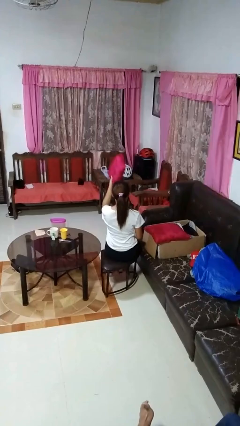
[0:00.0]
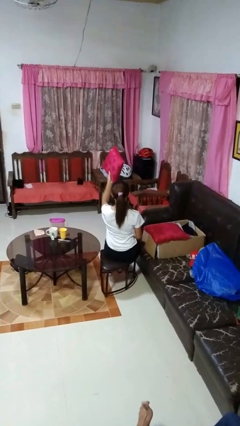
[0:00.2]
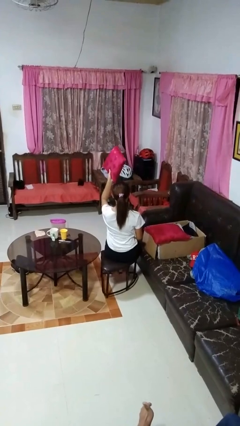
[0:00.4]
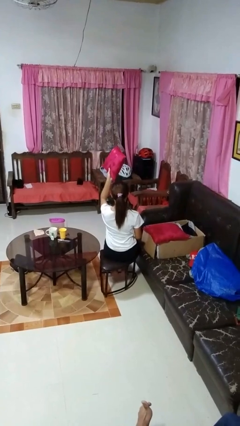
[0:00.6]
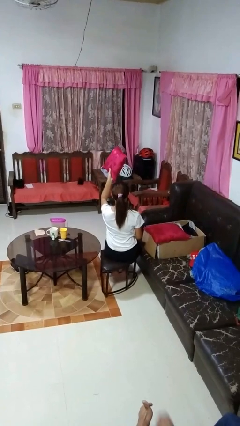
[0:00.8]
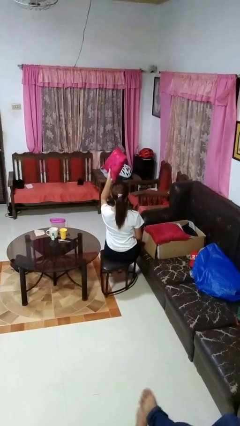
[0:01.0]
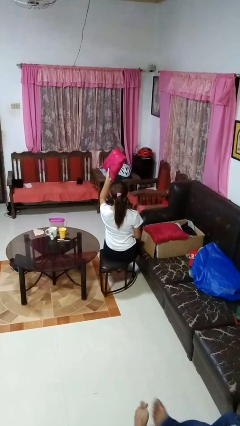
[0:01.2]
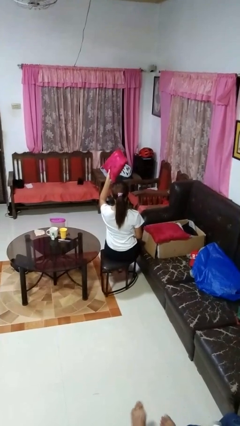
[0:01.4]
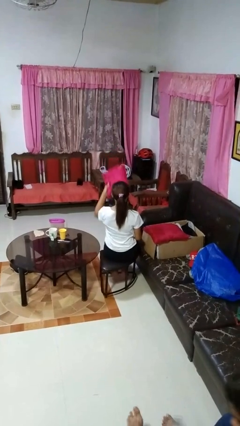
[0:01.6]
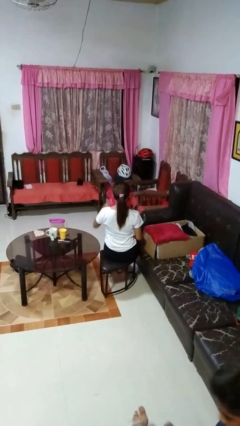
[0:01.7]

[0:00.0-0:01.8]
person holds object above head

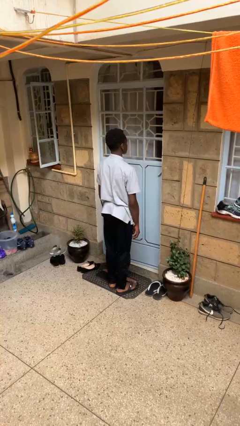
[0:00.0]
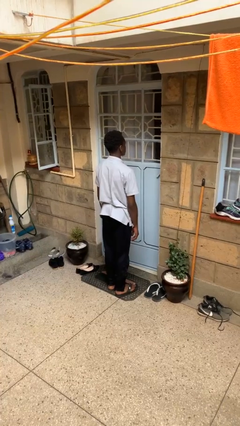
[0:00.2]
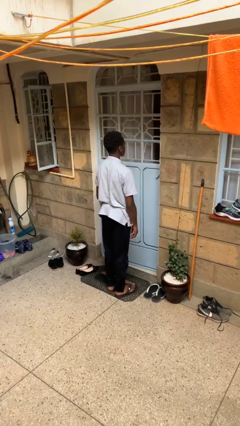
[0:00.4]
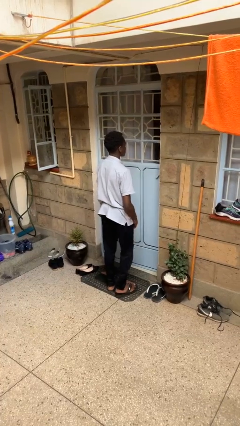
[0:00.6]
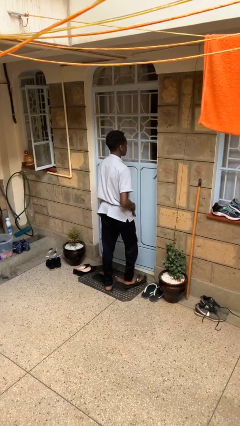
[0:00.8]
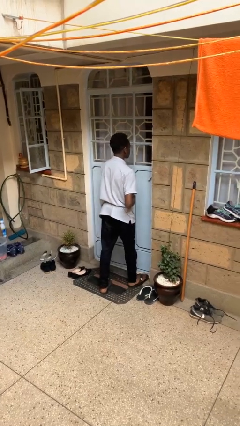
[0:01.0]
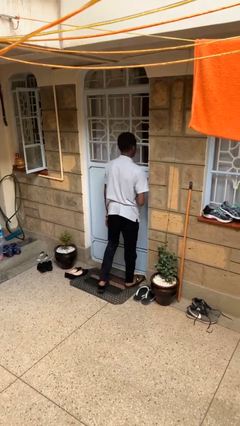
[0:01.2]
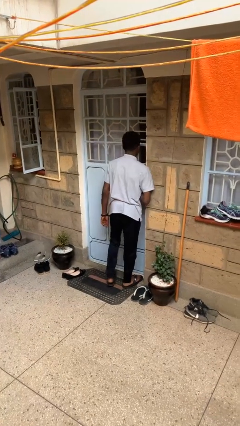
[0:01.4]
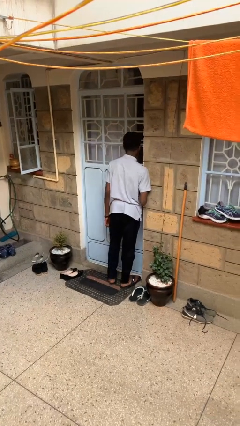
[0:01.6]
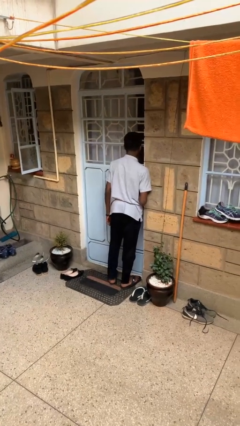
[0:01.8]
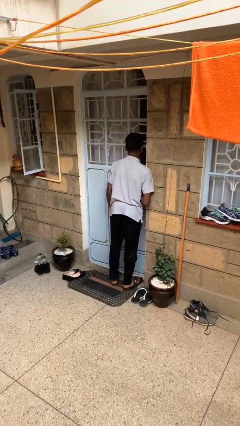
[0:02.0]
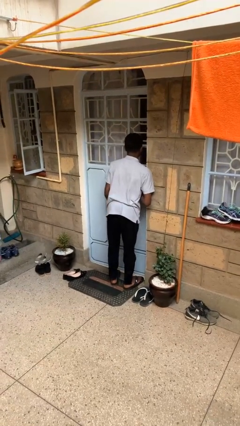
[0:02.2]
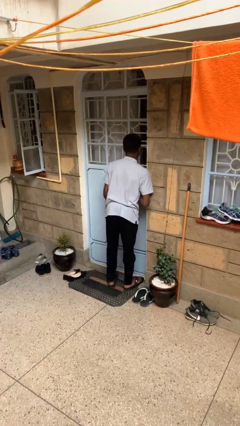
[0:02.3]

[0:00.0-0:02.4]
person bumps into wall

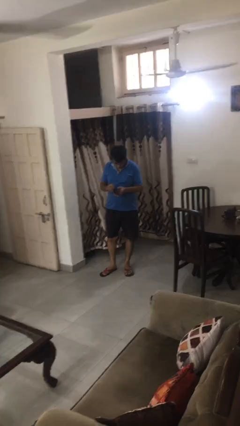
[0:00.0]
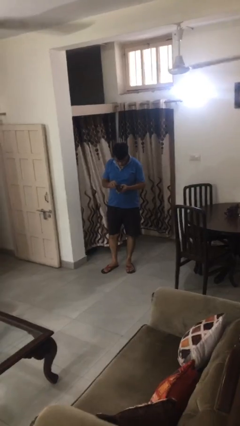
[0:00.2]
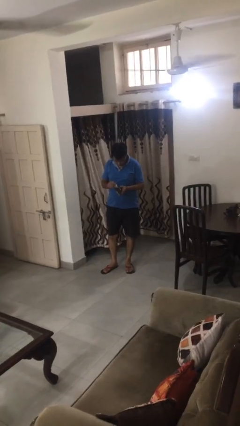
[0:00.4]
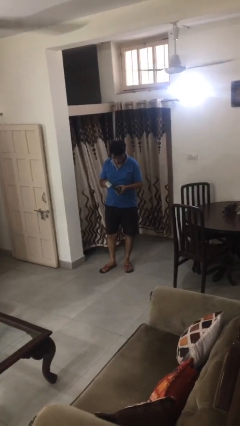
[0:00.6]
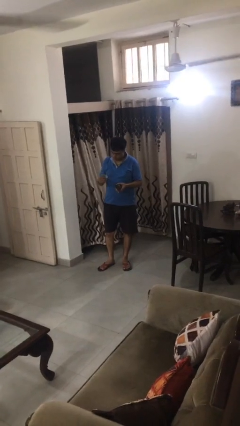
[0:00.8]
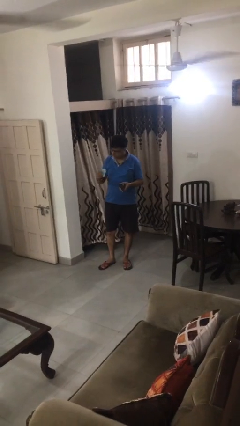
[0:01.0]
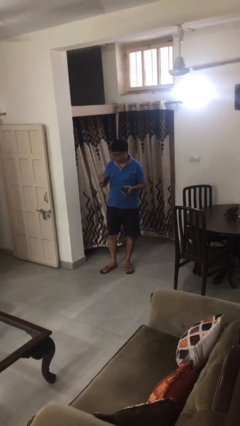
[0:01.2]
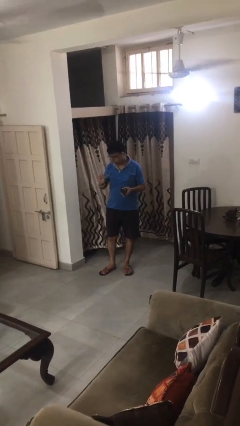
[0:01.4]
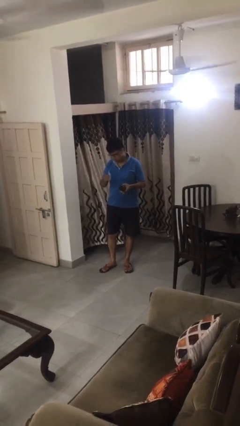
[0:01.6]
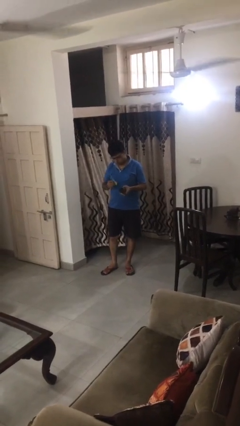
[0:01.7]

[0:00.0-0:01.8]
person takes object from purse

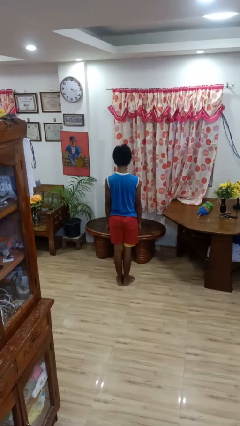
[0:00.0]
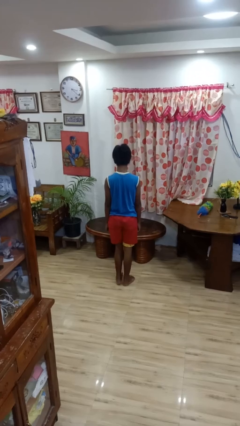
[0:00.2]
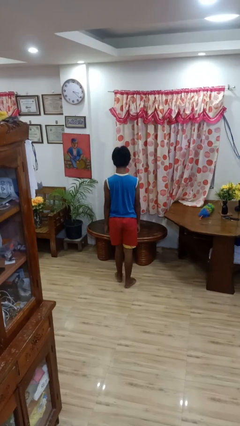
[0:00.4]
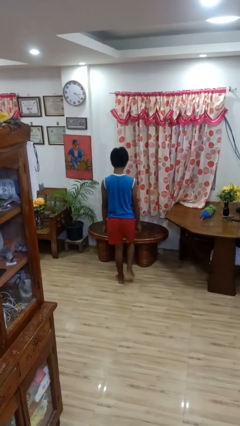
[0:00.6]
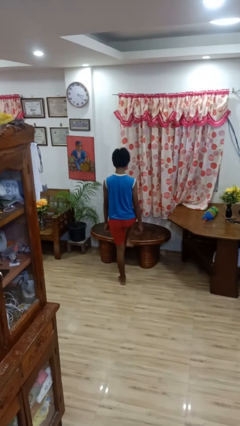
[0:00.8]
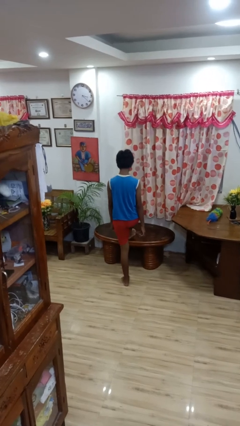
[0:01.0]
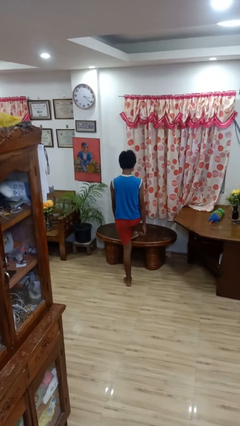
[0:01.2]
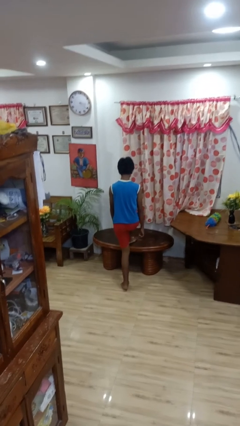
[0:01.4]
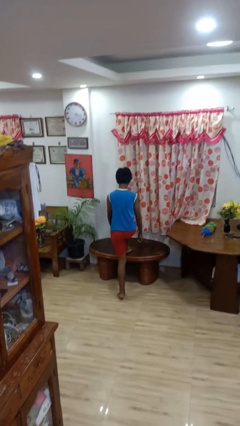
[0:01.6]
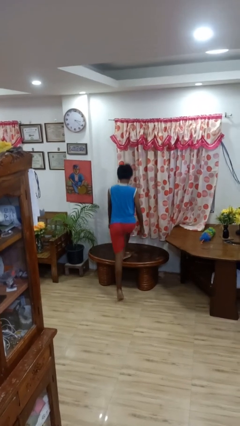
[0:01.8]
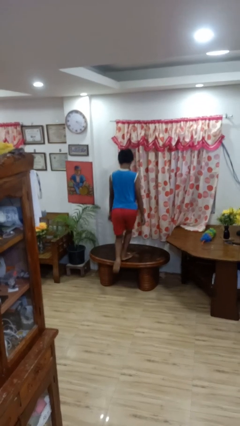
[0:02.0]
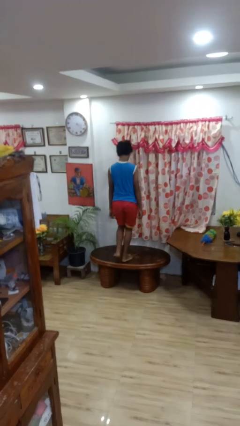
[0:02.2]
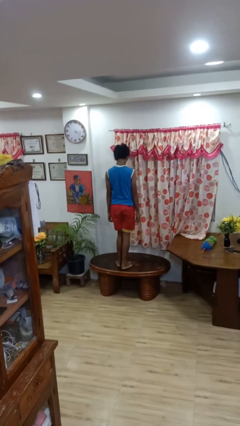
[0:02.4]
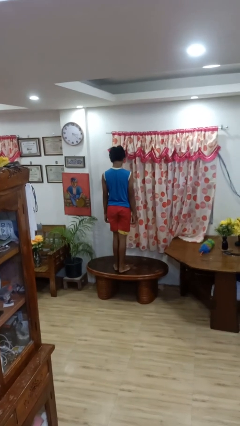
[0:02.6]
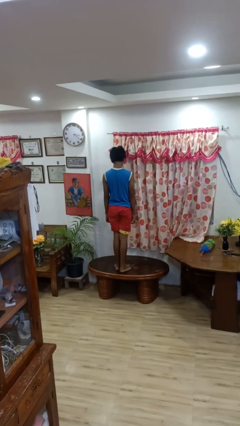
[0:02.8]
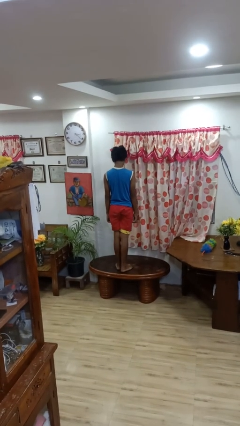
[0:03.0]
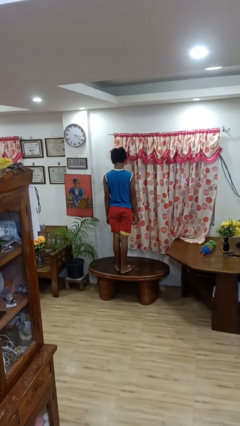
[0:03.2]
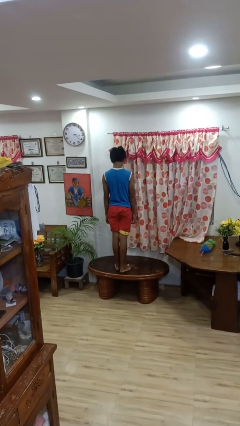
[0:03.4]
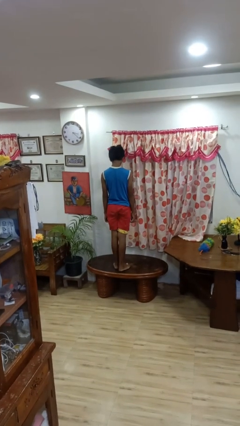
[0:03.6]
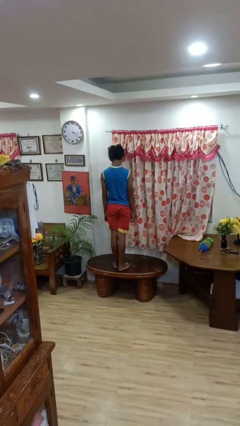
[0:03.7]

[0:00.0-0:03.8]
person climbs on table

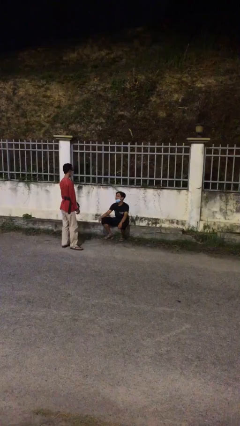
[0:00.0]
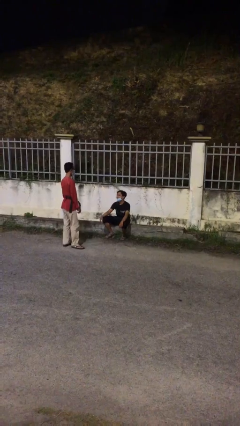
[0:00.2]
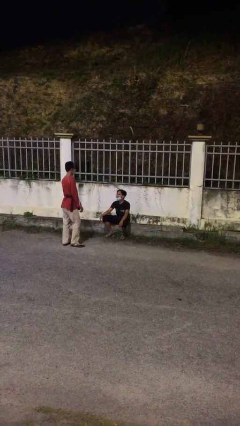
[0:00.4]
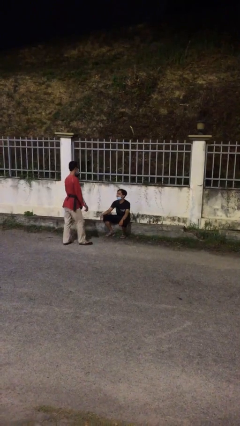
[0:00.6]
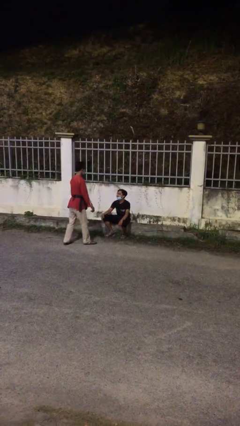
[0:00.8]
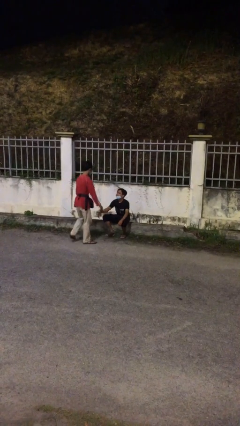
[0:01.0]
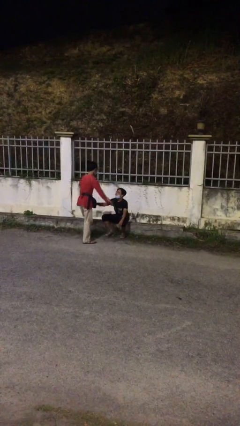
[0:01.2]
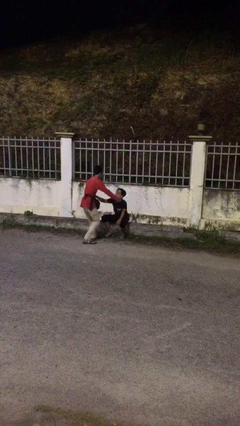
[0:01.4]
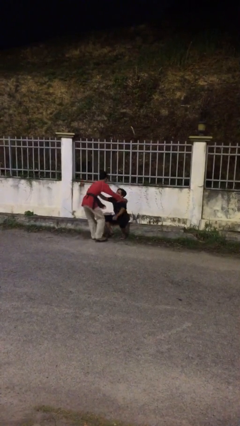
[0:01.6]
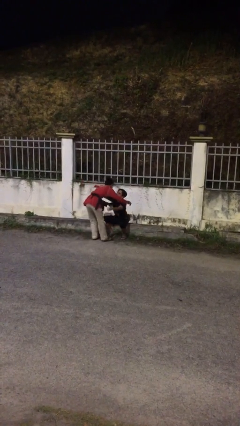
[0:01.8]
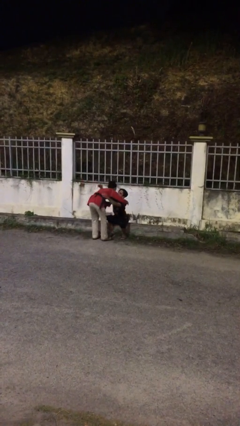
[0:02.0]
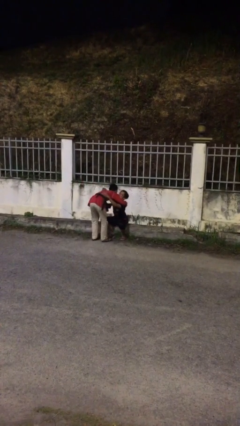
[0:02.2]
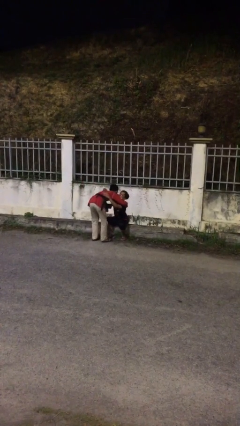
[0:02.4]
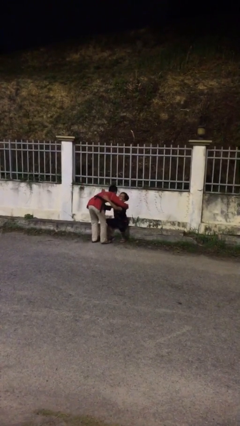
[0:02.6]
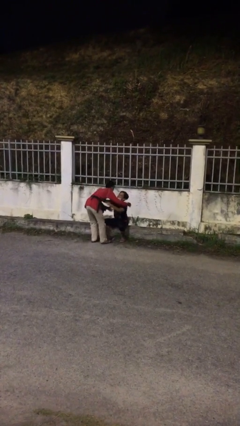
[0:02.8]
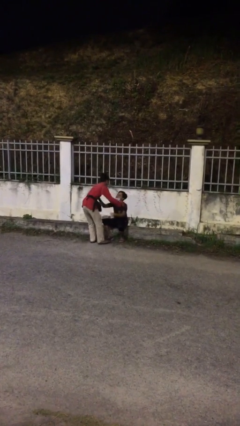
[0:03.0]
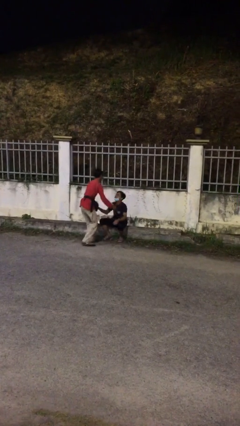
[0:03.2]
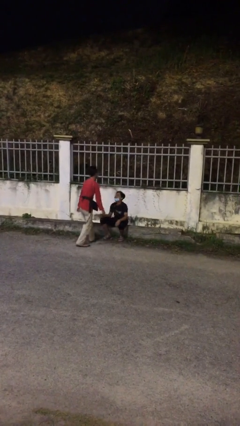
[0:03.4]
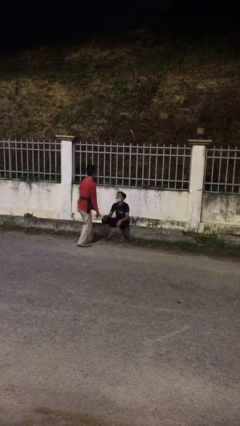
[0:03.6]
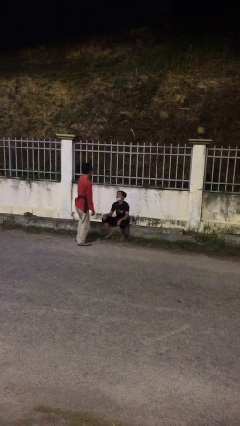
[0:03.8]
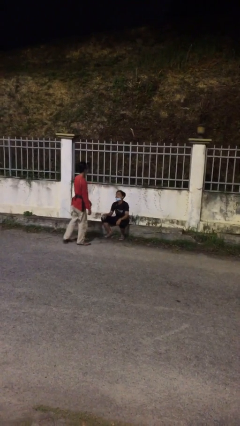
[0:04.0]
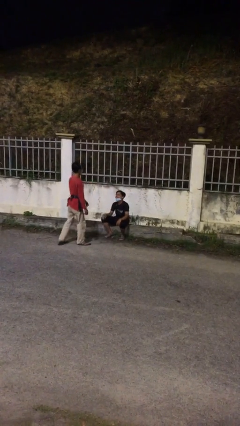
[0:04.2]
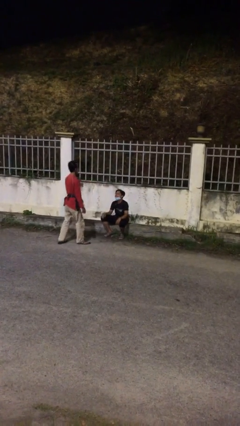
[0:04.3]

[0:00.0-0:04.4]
person embraces person

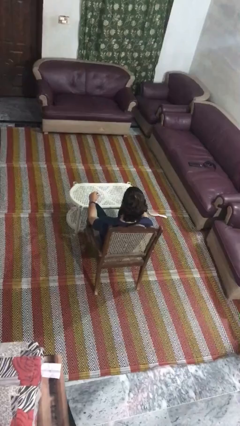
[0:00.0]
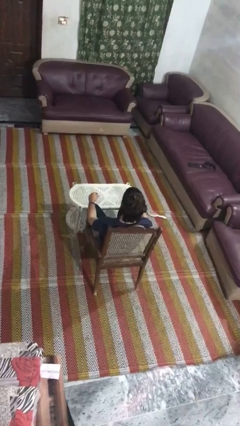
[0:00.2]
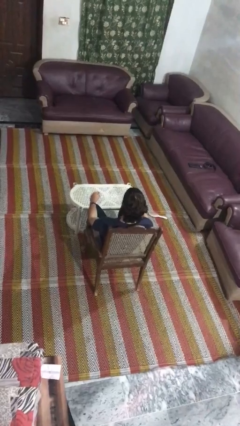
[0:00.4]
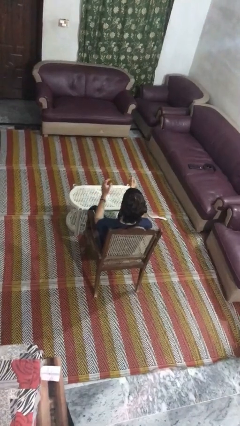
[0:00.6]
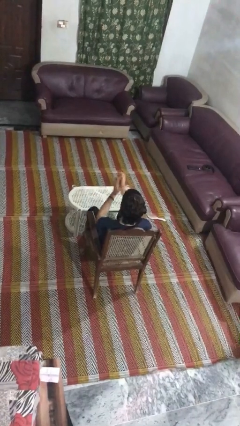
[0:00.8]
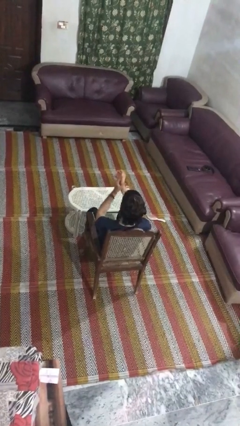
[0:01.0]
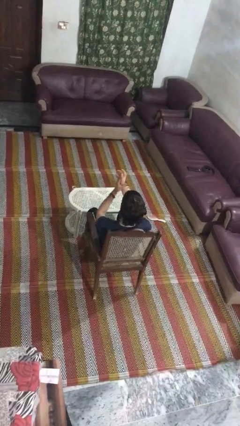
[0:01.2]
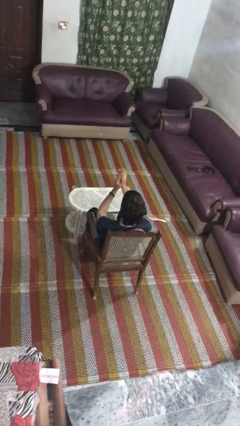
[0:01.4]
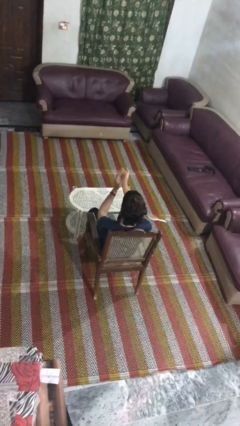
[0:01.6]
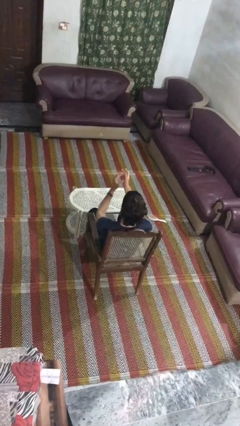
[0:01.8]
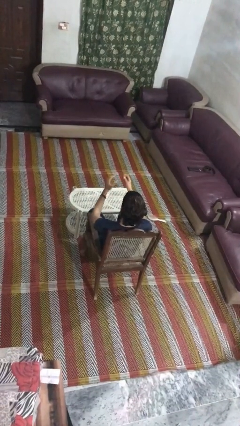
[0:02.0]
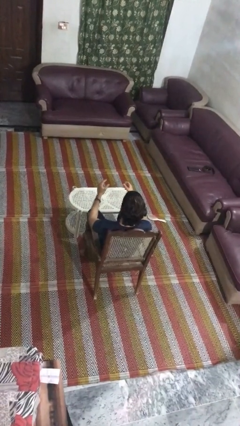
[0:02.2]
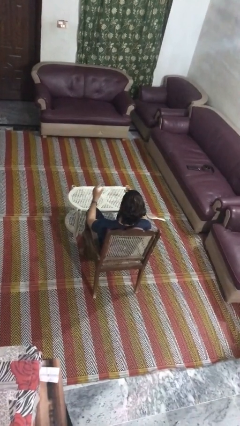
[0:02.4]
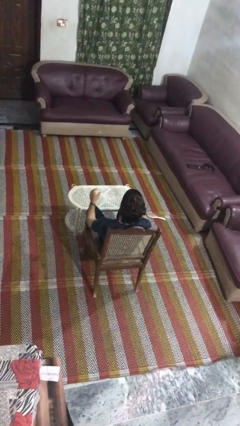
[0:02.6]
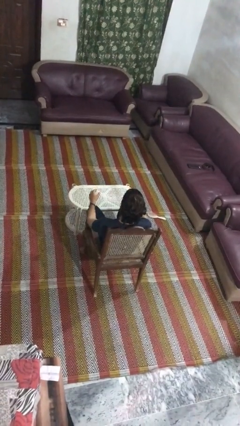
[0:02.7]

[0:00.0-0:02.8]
person claps hands
